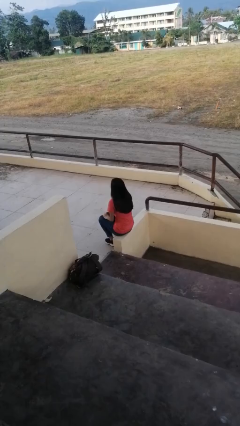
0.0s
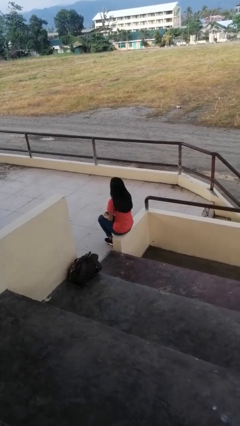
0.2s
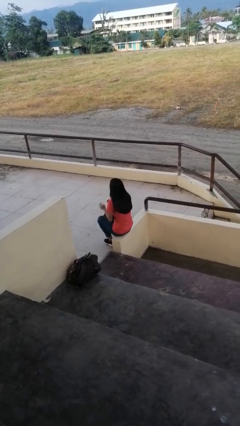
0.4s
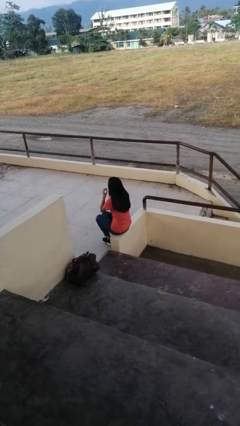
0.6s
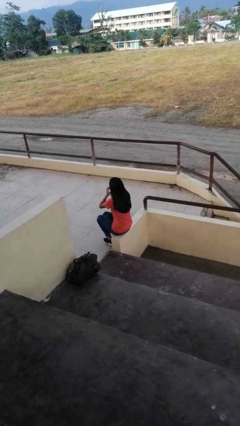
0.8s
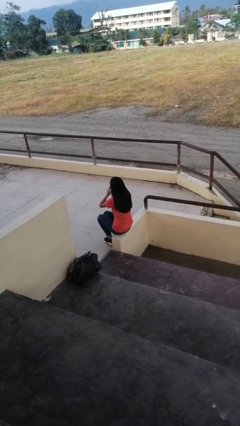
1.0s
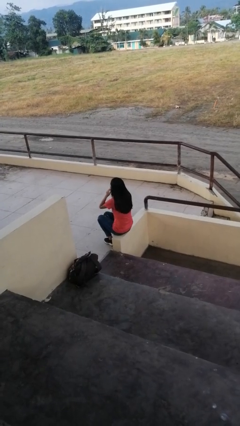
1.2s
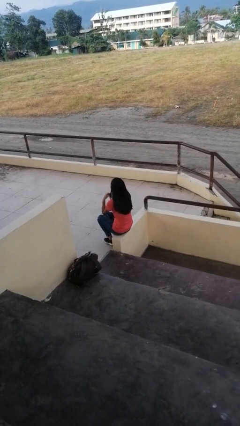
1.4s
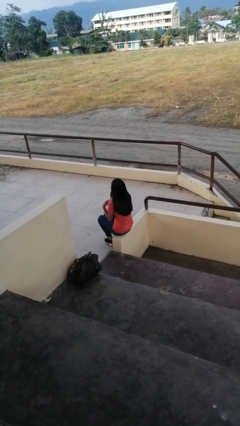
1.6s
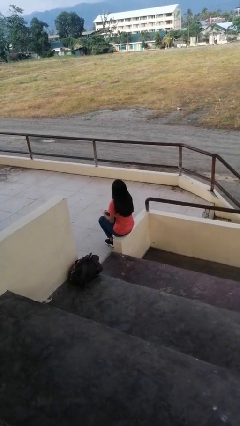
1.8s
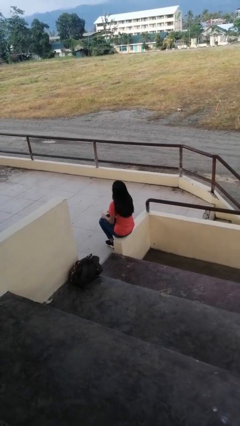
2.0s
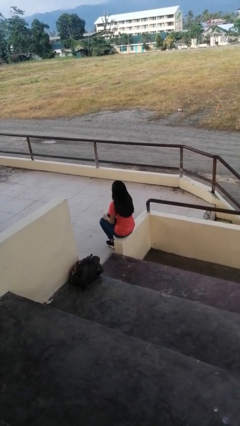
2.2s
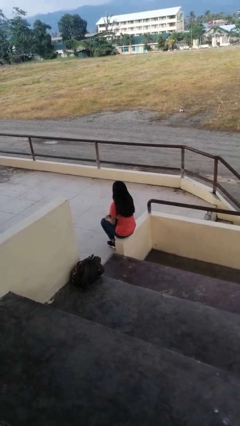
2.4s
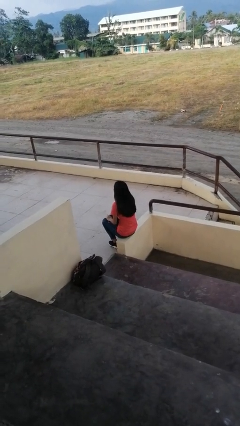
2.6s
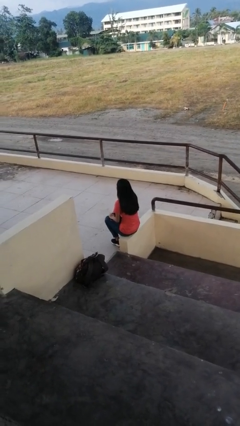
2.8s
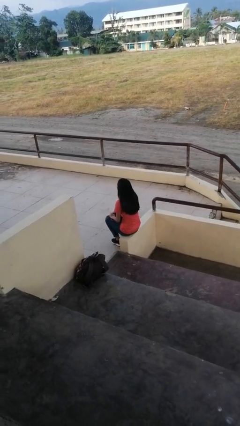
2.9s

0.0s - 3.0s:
person takes off headphones

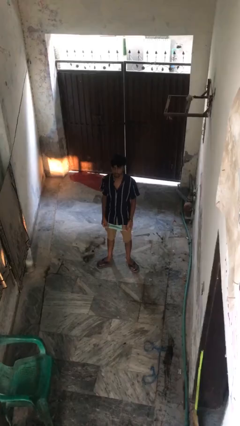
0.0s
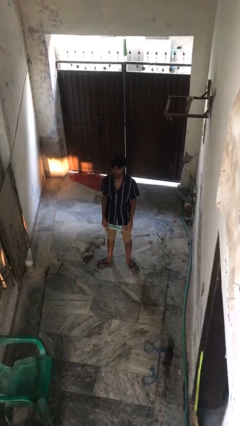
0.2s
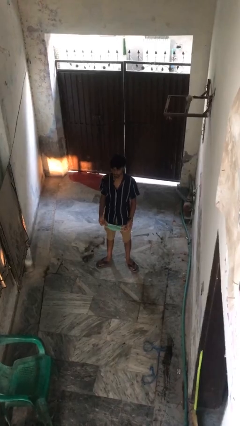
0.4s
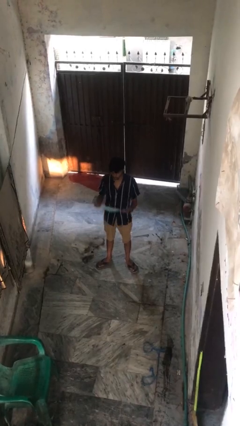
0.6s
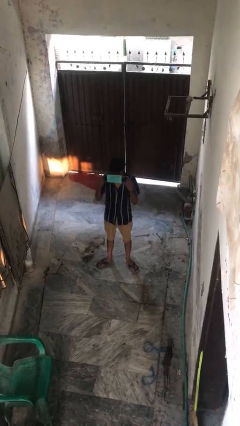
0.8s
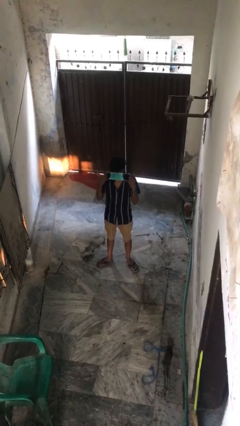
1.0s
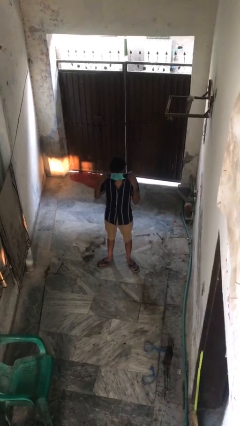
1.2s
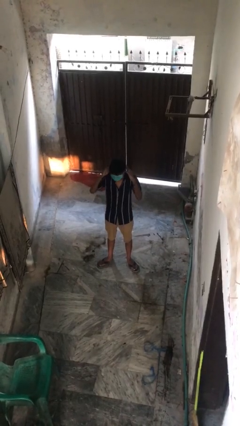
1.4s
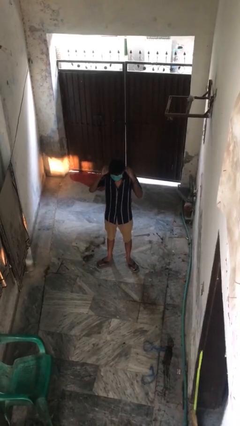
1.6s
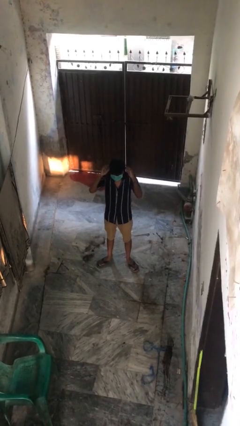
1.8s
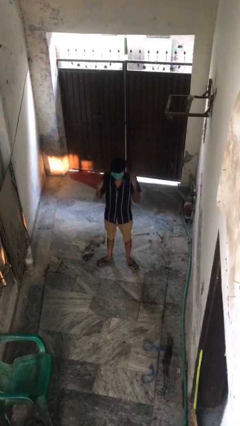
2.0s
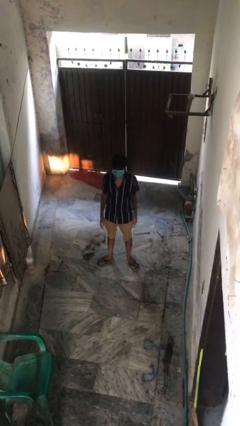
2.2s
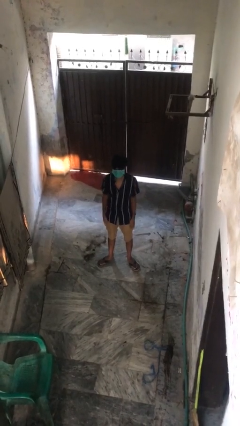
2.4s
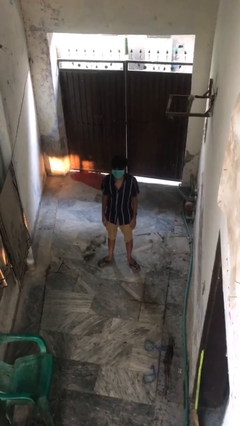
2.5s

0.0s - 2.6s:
person puts on facemask

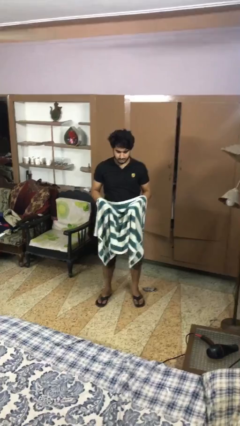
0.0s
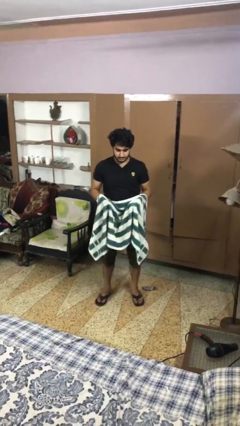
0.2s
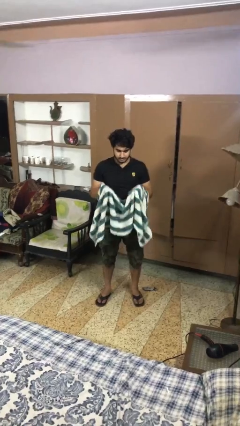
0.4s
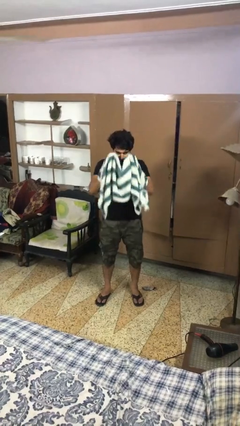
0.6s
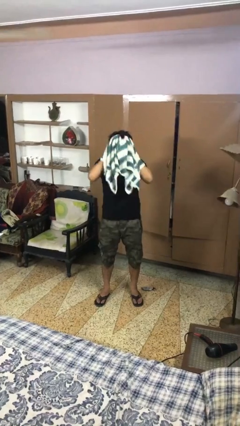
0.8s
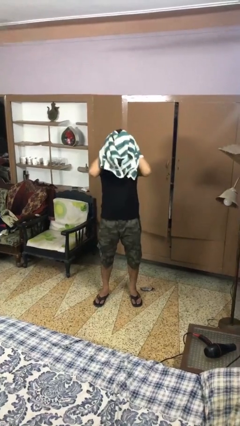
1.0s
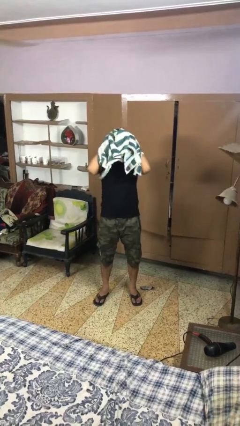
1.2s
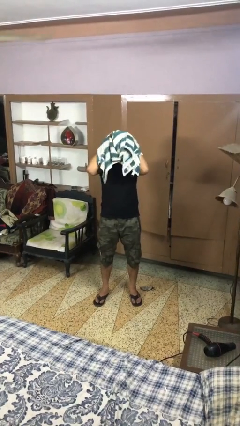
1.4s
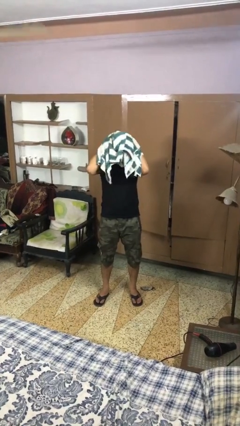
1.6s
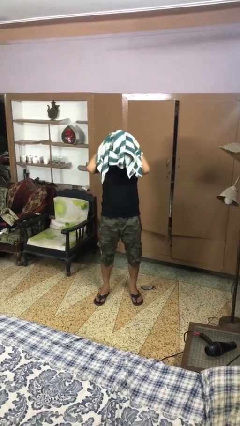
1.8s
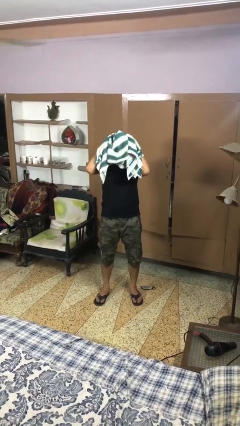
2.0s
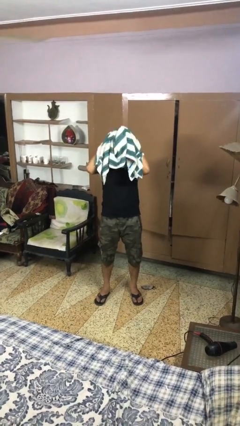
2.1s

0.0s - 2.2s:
person dries hair with towel

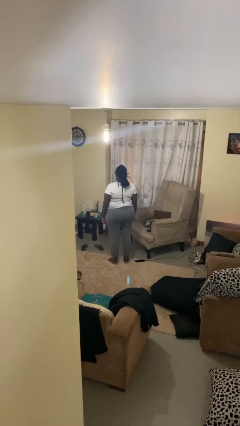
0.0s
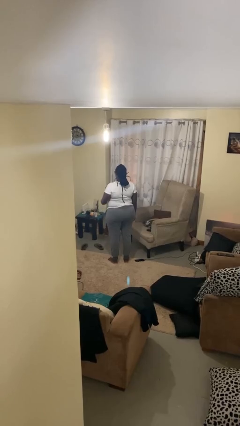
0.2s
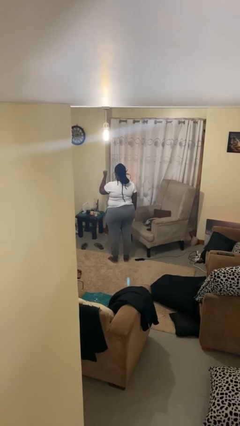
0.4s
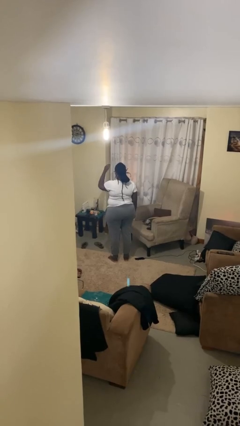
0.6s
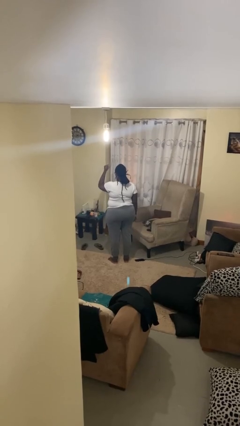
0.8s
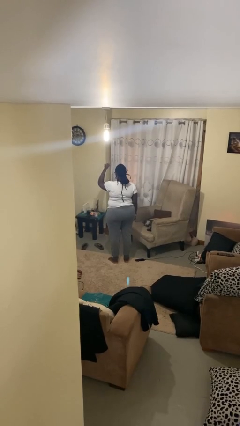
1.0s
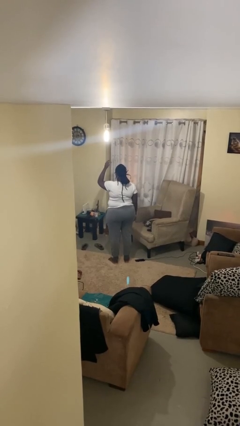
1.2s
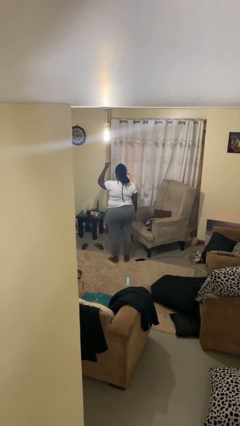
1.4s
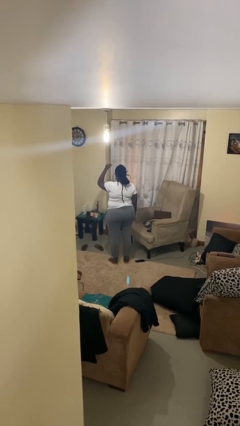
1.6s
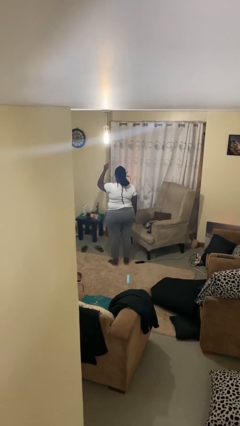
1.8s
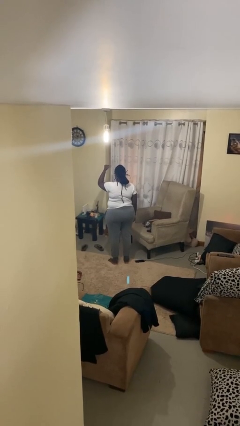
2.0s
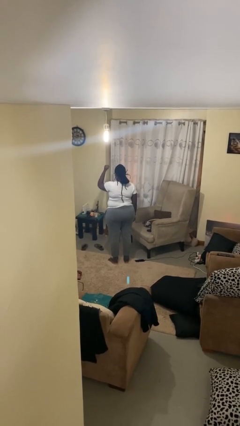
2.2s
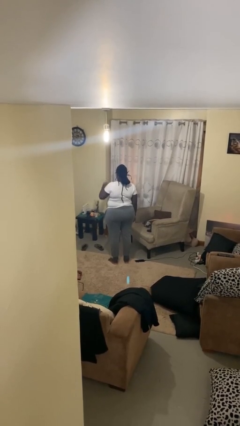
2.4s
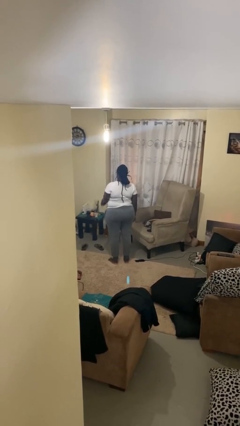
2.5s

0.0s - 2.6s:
person snaps fingers

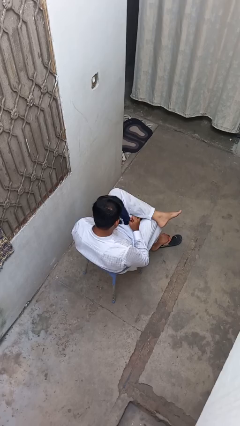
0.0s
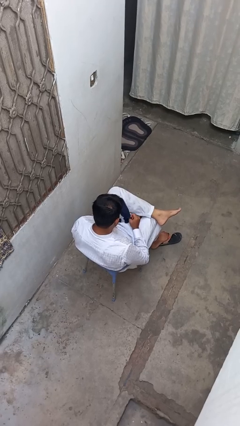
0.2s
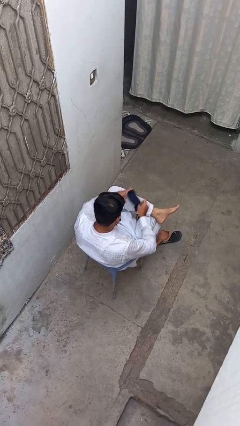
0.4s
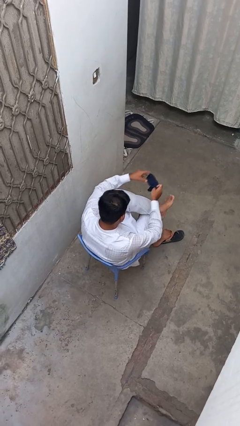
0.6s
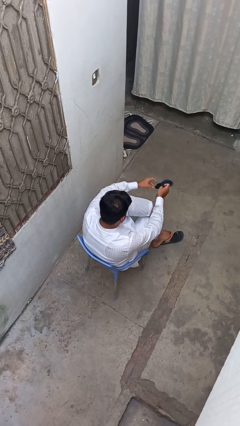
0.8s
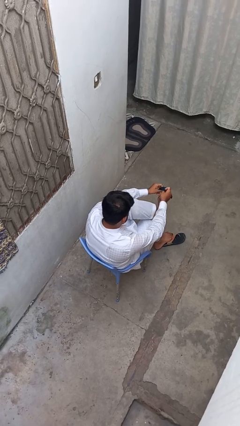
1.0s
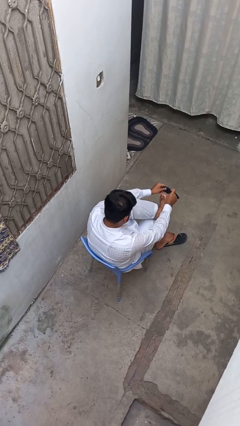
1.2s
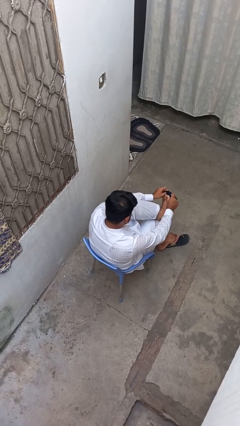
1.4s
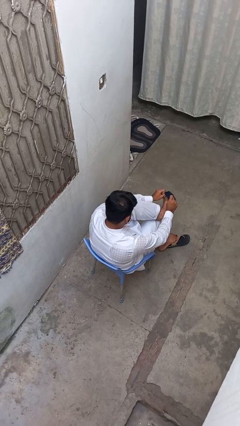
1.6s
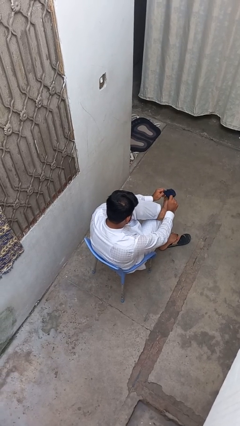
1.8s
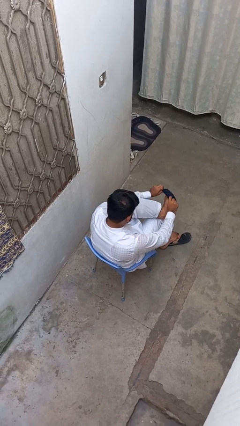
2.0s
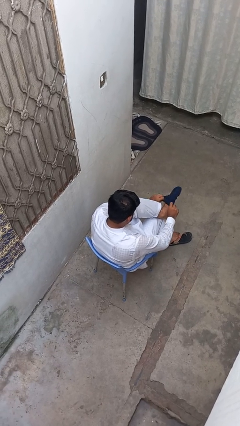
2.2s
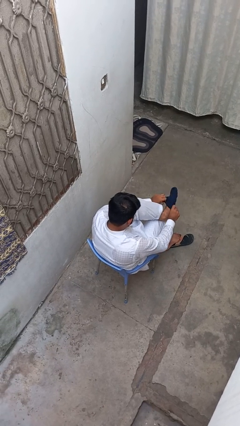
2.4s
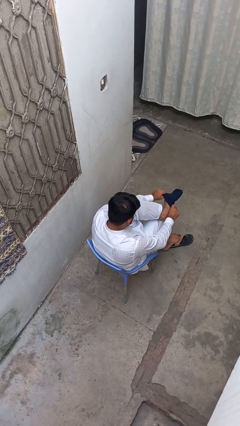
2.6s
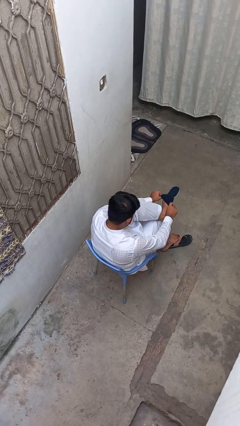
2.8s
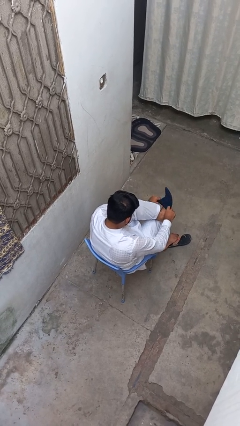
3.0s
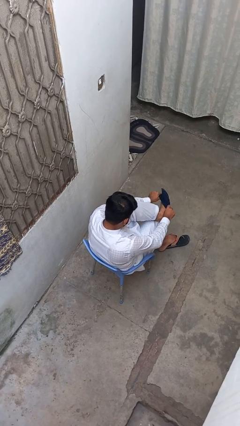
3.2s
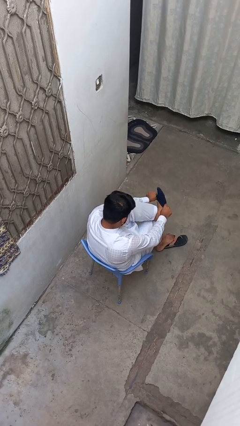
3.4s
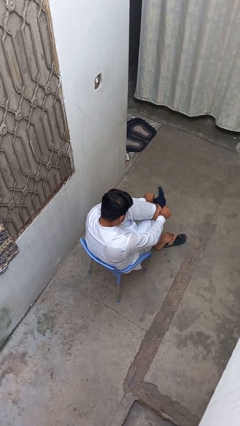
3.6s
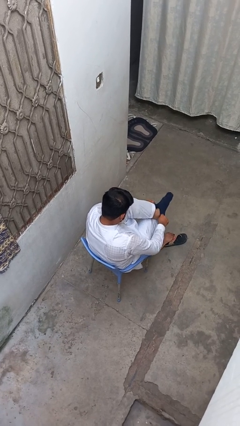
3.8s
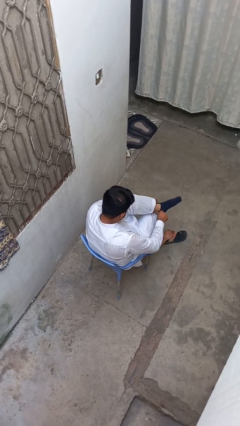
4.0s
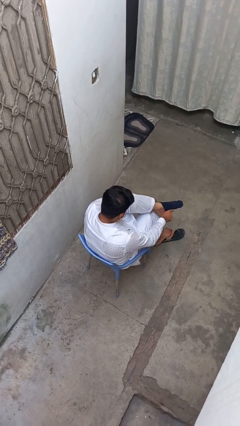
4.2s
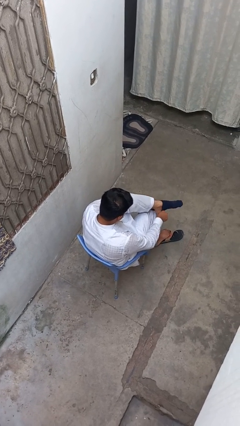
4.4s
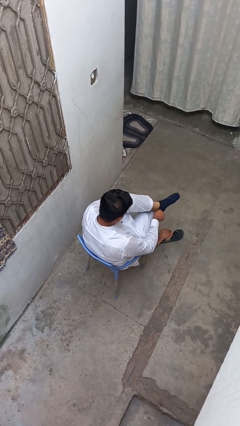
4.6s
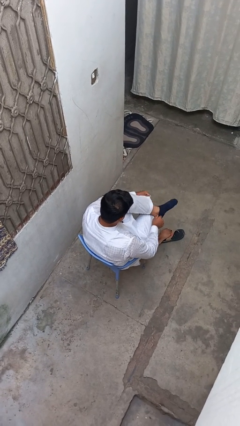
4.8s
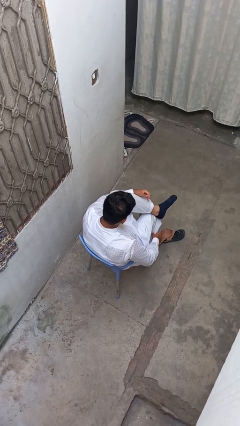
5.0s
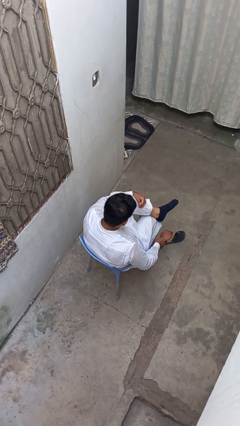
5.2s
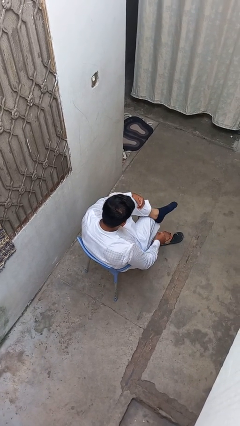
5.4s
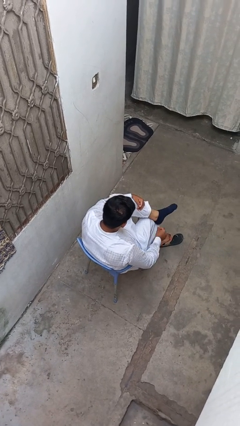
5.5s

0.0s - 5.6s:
person puts on socks

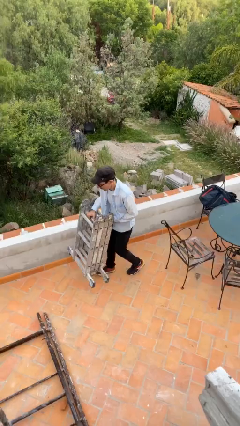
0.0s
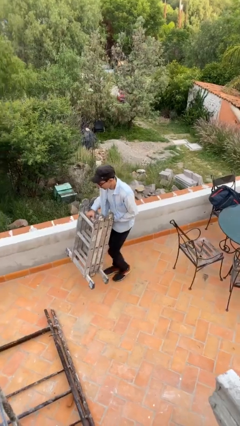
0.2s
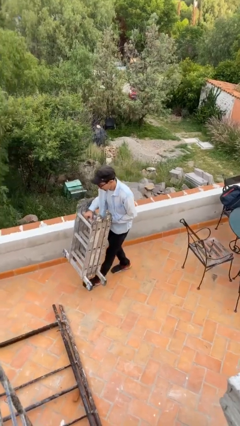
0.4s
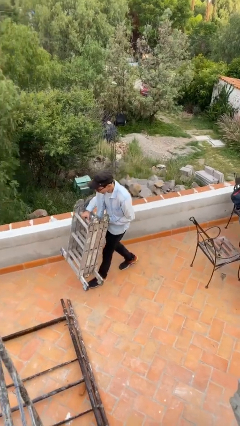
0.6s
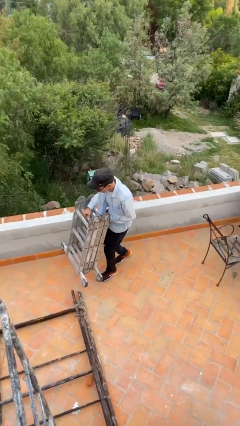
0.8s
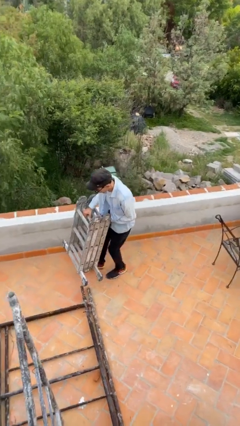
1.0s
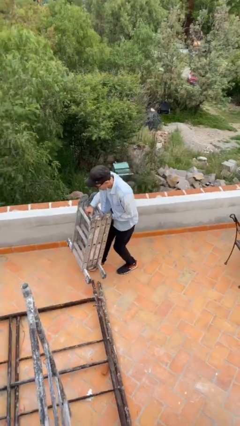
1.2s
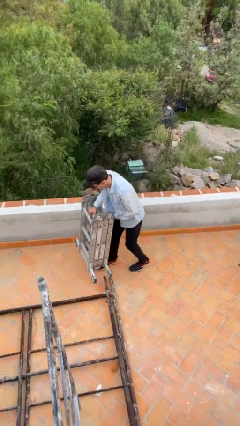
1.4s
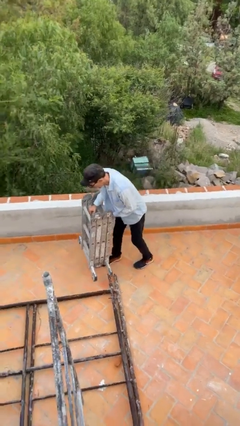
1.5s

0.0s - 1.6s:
person carries heavy object
